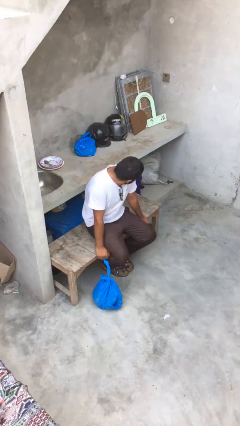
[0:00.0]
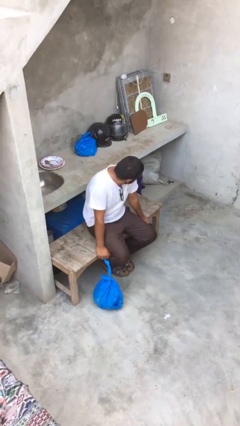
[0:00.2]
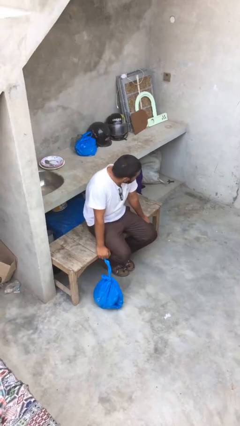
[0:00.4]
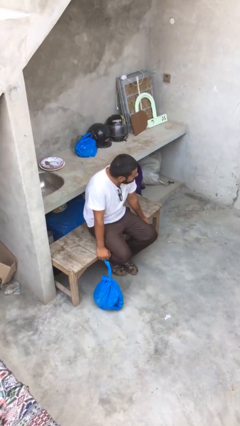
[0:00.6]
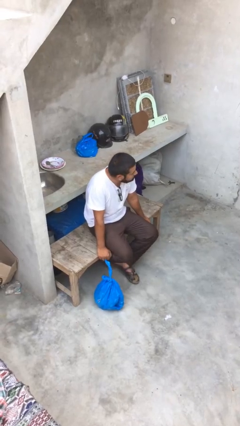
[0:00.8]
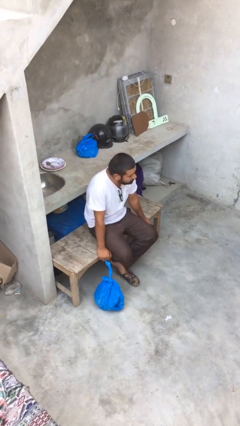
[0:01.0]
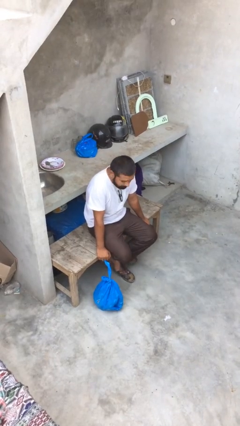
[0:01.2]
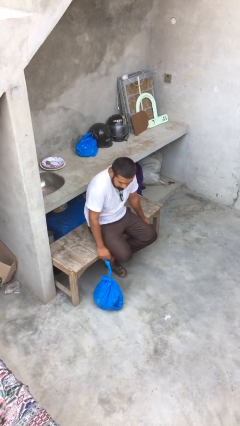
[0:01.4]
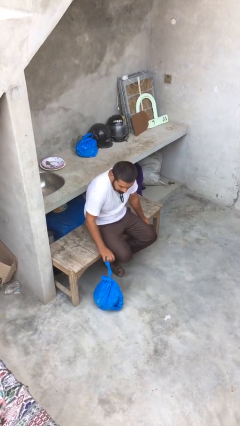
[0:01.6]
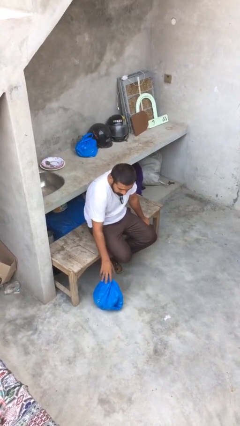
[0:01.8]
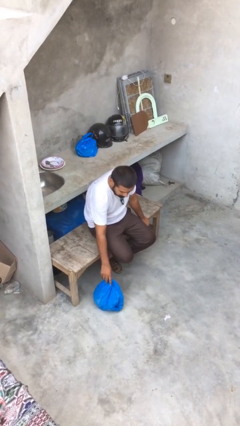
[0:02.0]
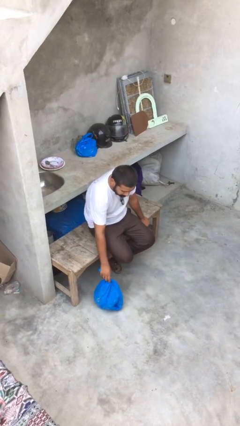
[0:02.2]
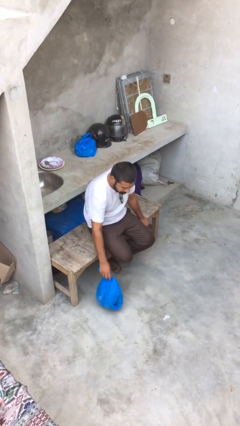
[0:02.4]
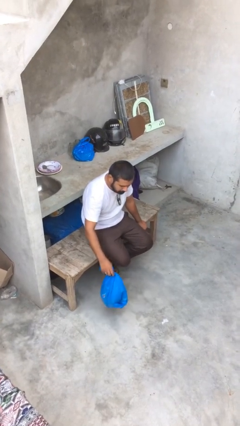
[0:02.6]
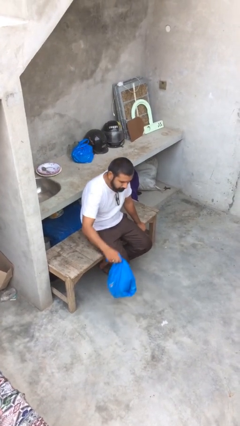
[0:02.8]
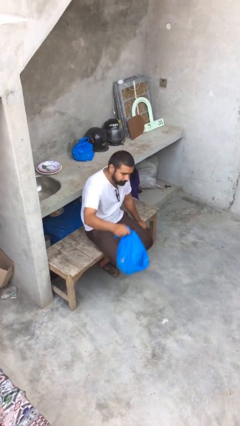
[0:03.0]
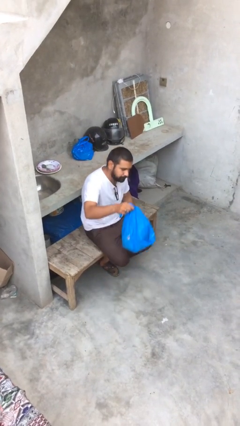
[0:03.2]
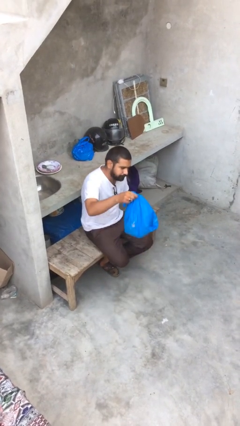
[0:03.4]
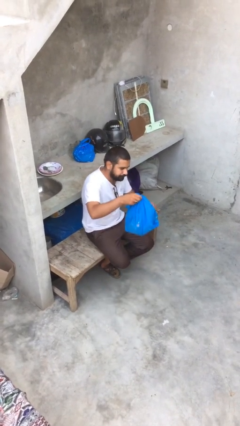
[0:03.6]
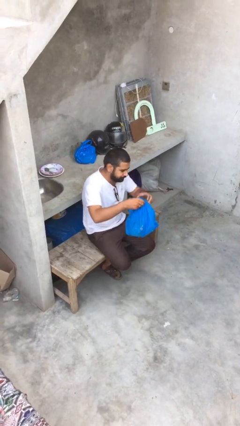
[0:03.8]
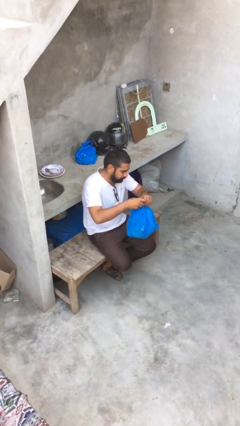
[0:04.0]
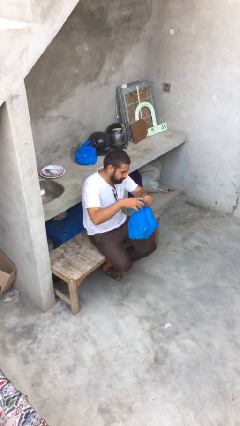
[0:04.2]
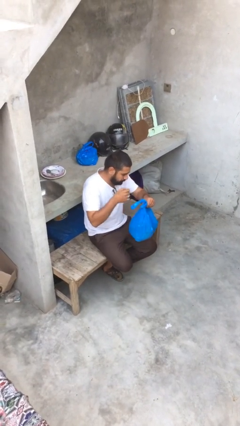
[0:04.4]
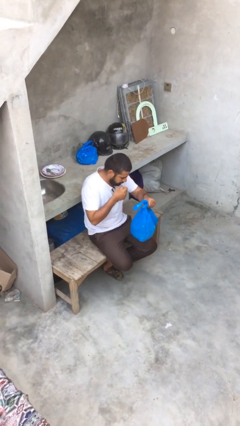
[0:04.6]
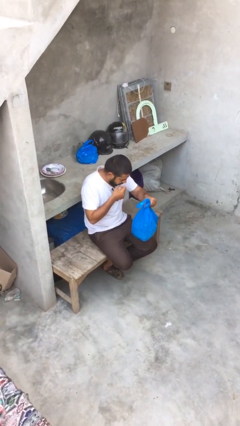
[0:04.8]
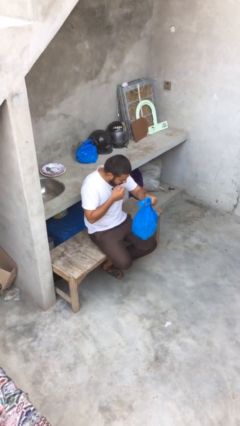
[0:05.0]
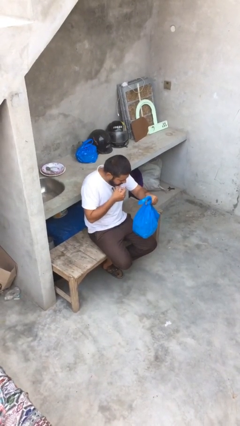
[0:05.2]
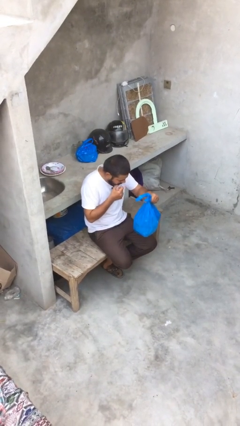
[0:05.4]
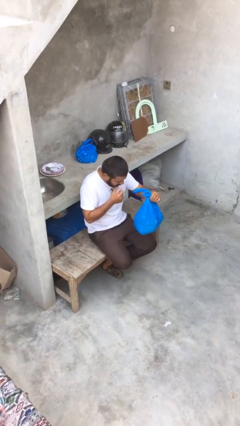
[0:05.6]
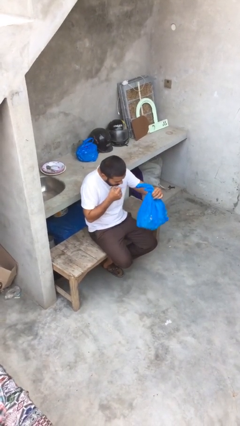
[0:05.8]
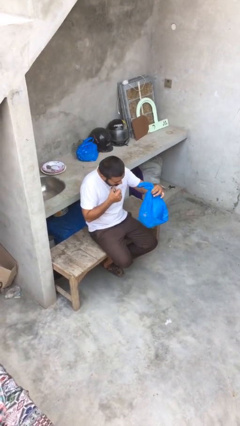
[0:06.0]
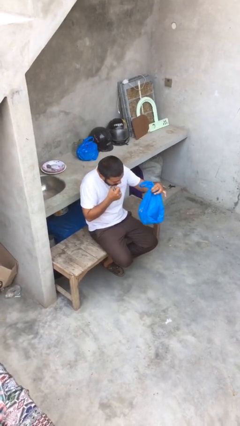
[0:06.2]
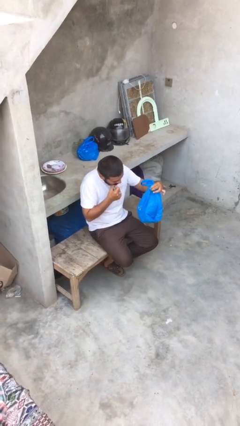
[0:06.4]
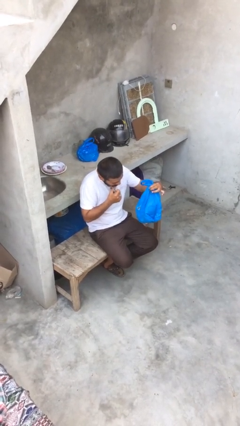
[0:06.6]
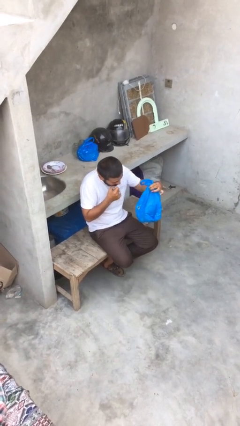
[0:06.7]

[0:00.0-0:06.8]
person picks up object from floor

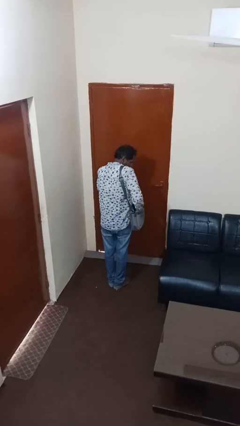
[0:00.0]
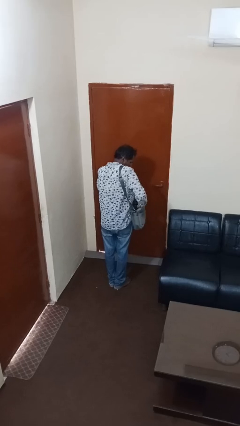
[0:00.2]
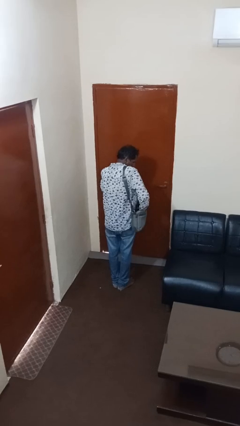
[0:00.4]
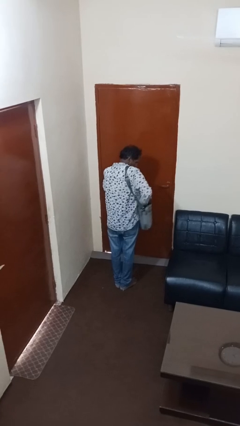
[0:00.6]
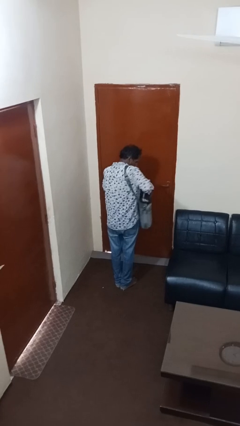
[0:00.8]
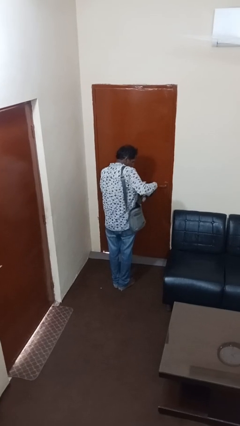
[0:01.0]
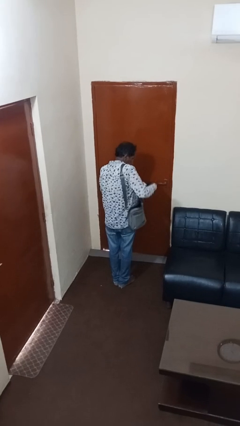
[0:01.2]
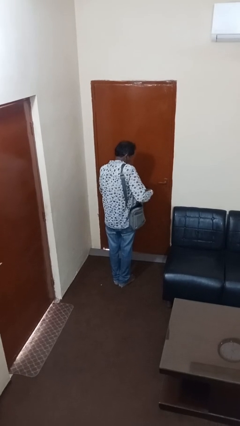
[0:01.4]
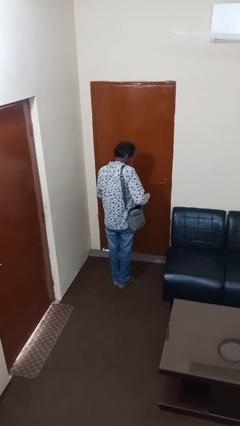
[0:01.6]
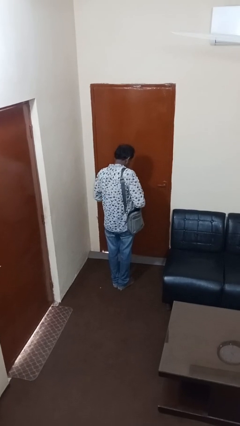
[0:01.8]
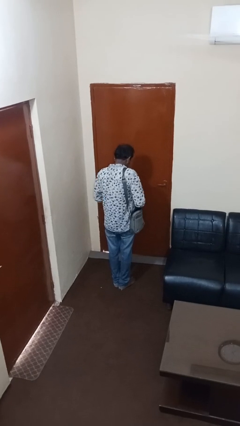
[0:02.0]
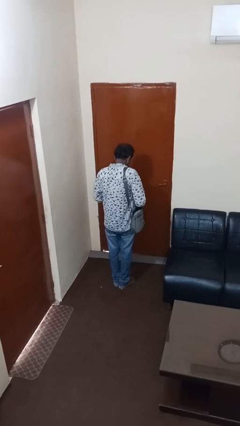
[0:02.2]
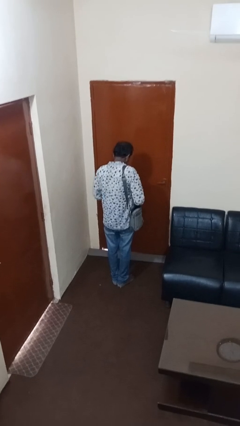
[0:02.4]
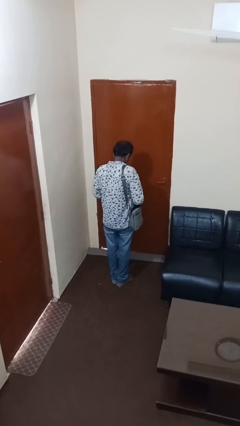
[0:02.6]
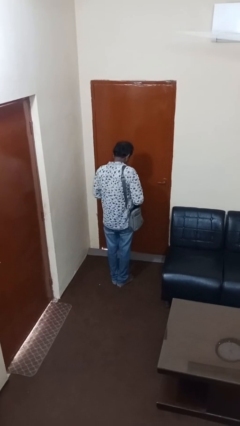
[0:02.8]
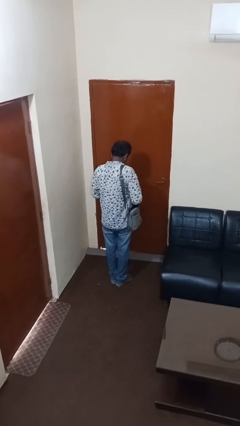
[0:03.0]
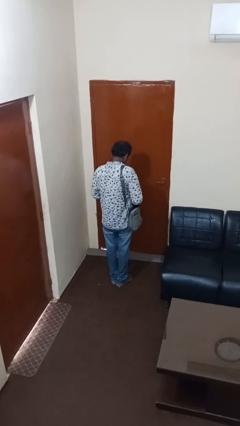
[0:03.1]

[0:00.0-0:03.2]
person takes object from purse

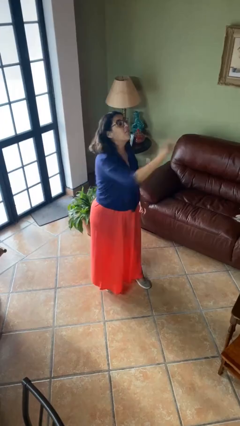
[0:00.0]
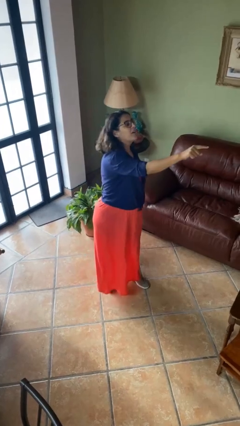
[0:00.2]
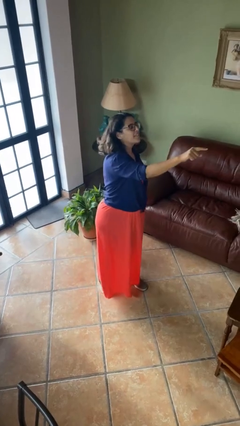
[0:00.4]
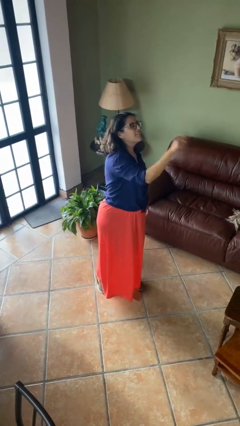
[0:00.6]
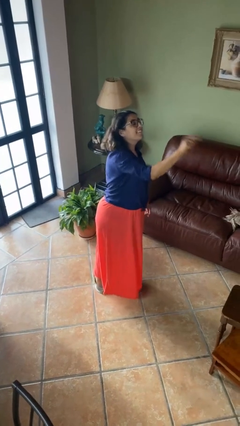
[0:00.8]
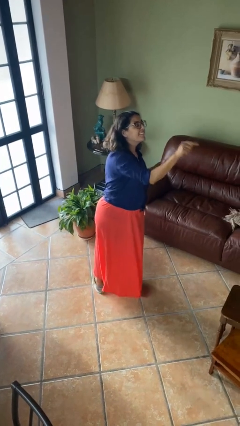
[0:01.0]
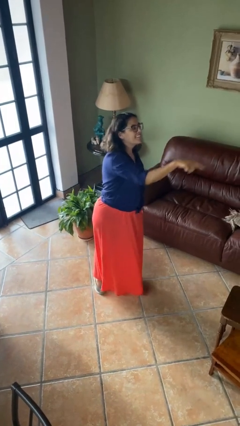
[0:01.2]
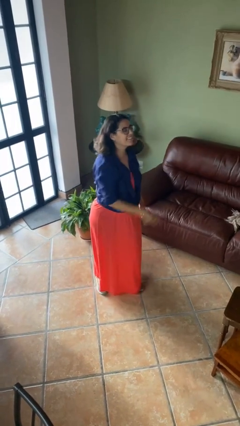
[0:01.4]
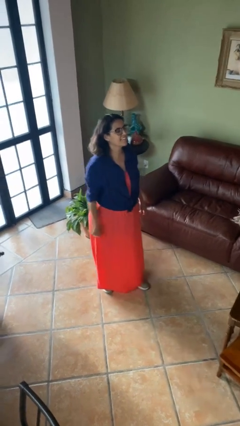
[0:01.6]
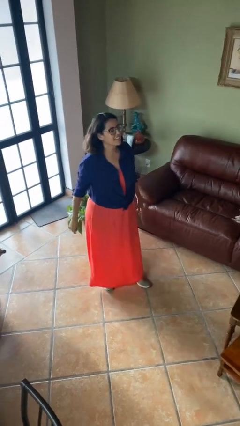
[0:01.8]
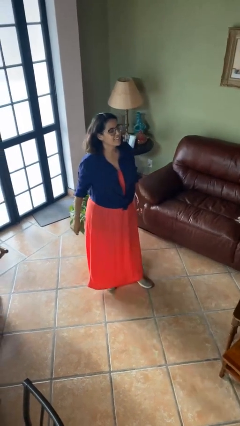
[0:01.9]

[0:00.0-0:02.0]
person points at person

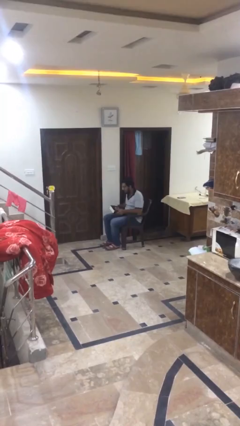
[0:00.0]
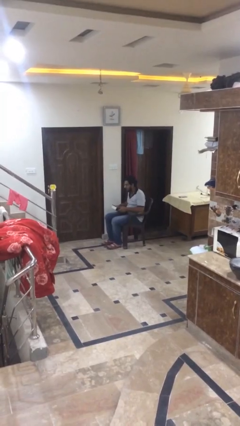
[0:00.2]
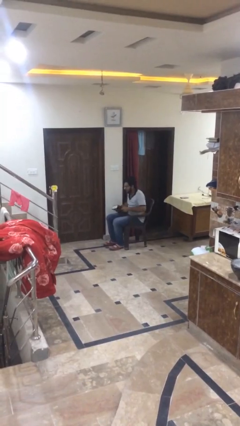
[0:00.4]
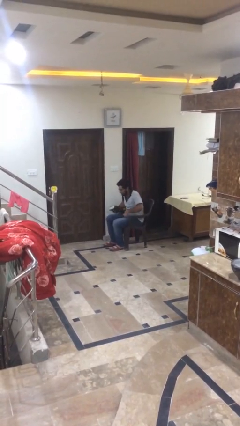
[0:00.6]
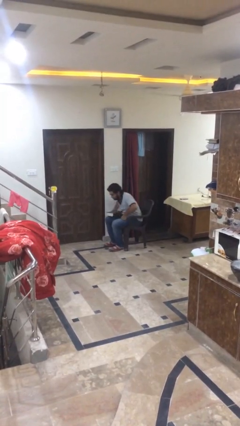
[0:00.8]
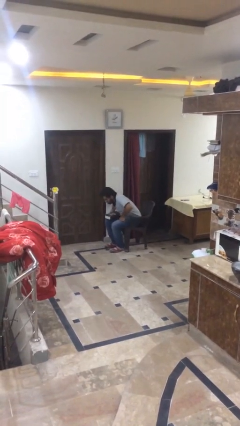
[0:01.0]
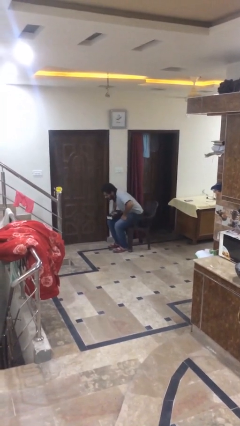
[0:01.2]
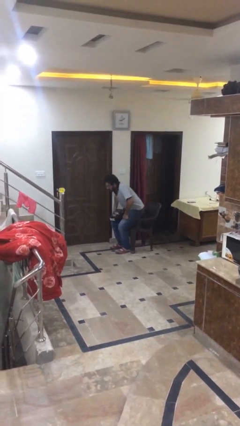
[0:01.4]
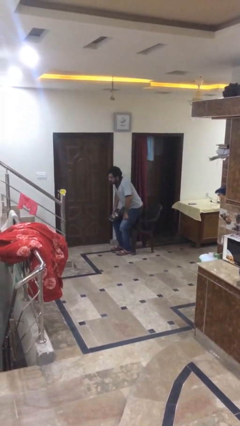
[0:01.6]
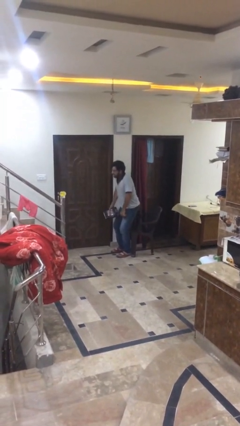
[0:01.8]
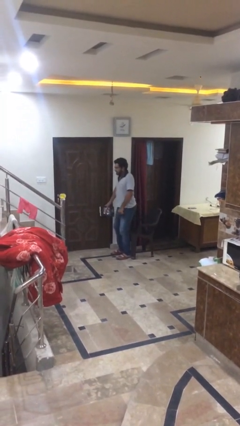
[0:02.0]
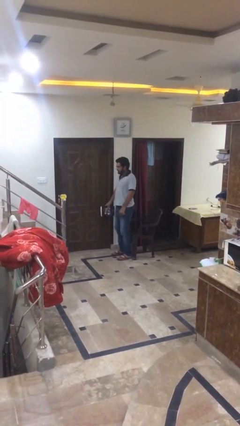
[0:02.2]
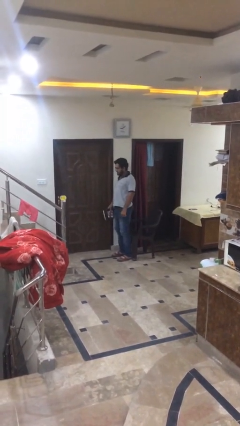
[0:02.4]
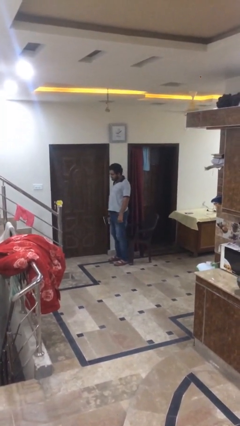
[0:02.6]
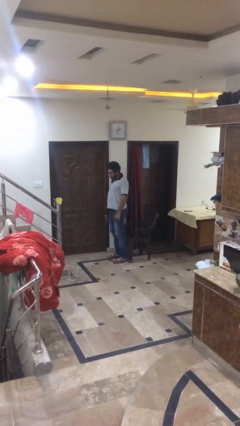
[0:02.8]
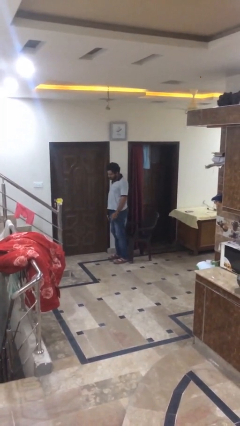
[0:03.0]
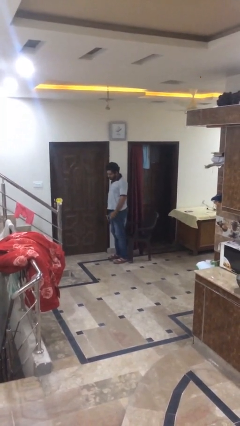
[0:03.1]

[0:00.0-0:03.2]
person stands up

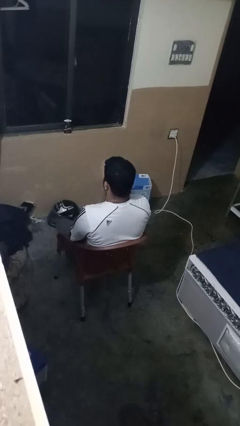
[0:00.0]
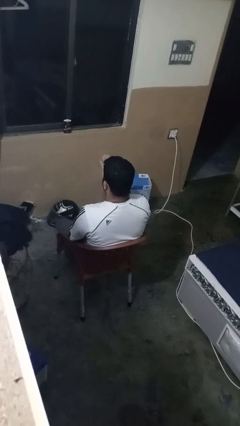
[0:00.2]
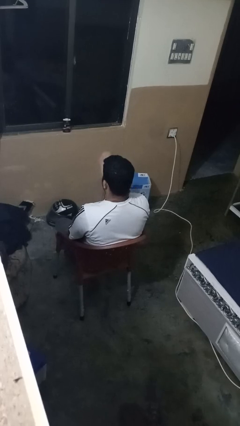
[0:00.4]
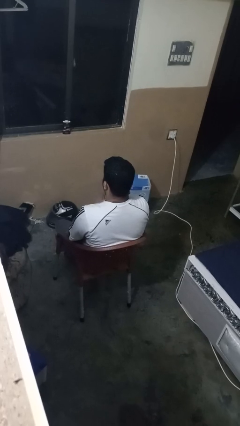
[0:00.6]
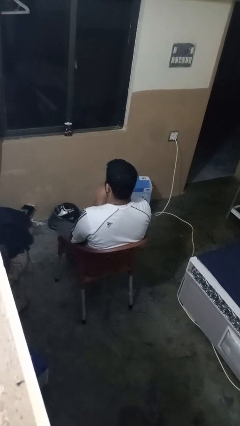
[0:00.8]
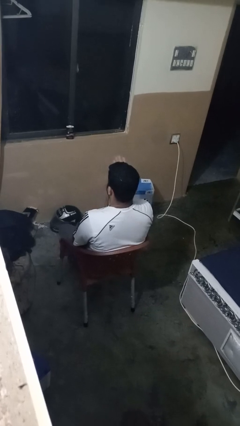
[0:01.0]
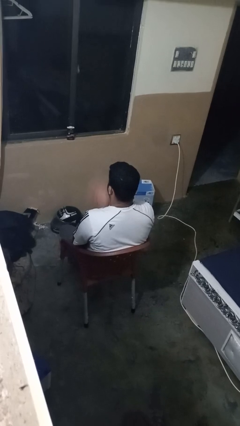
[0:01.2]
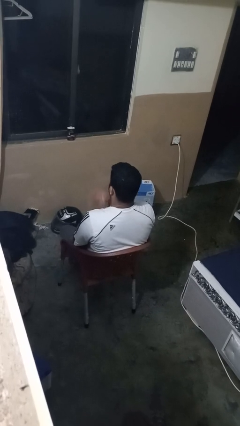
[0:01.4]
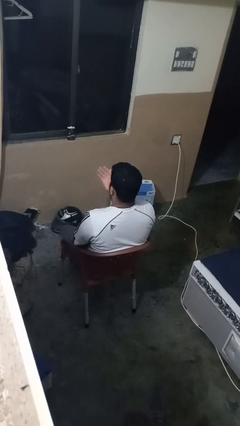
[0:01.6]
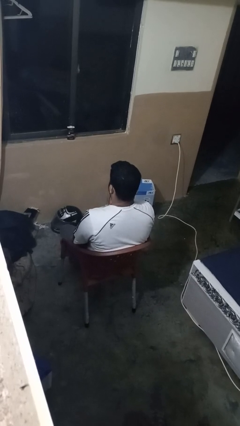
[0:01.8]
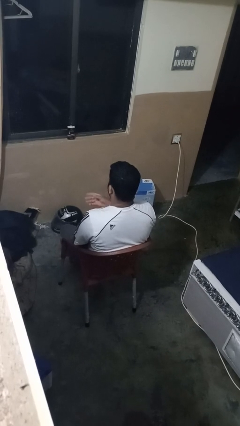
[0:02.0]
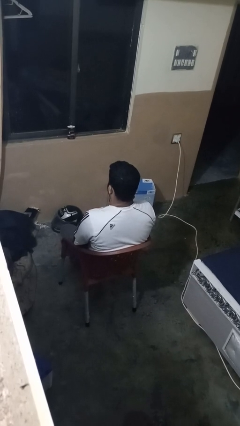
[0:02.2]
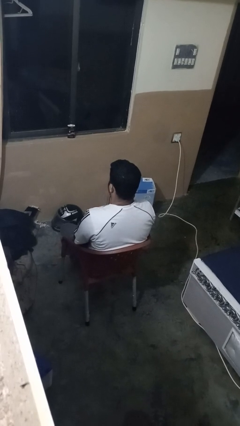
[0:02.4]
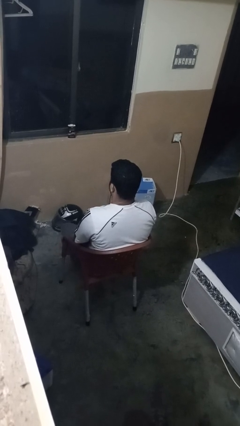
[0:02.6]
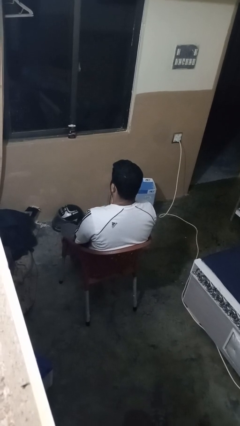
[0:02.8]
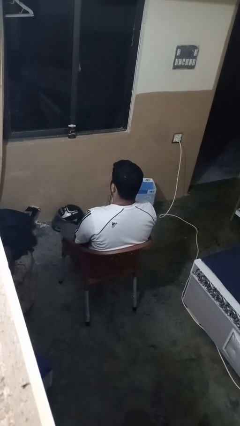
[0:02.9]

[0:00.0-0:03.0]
person drums on chest
